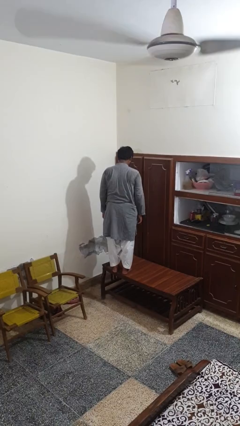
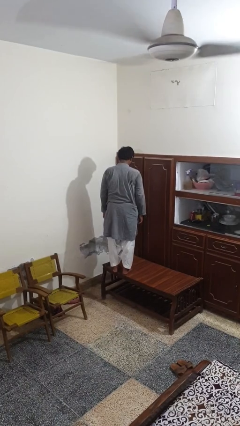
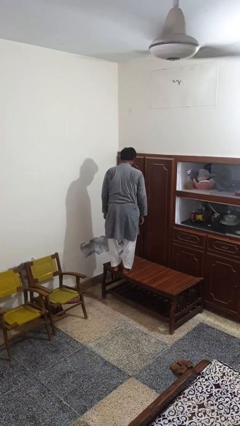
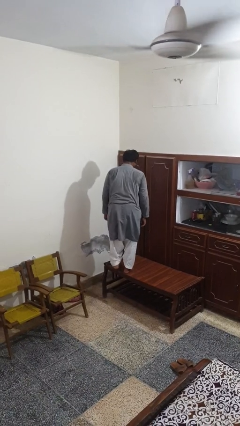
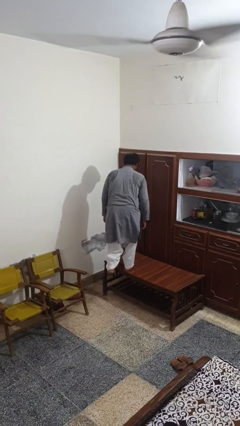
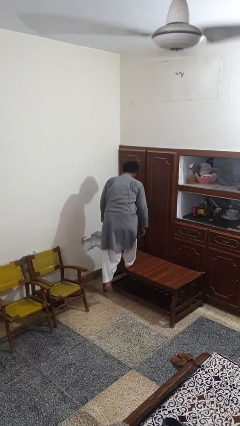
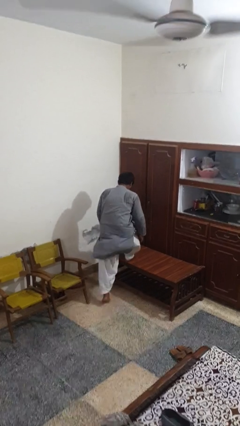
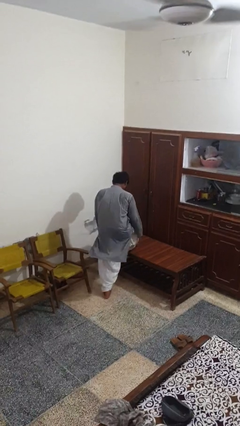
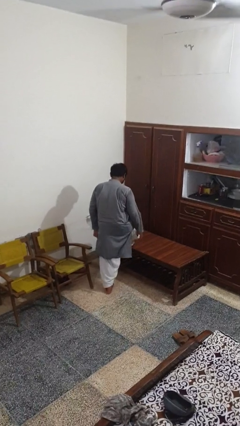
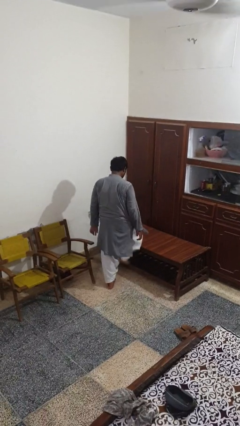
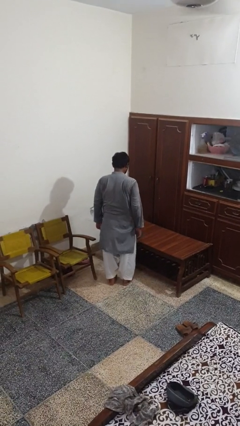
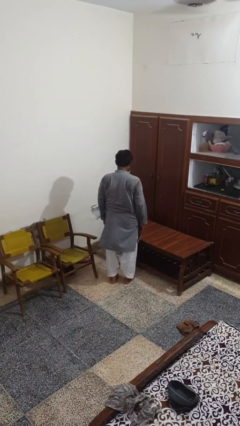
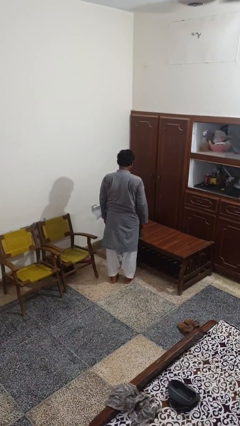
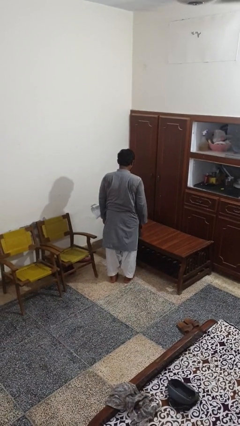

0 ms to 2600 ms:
person climbs off table

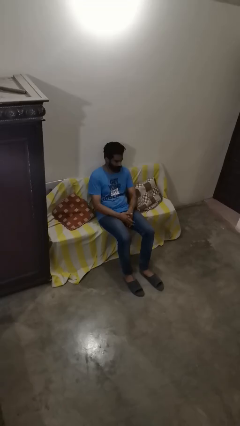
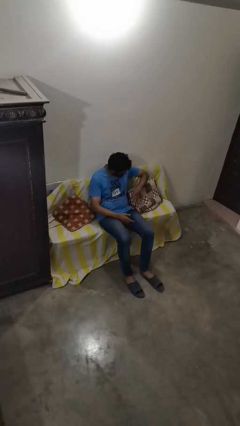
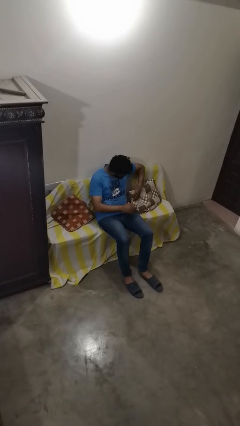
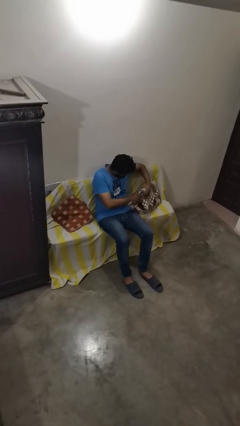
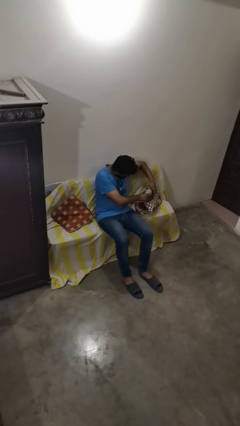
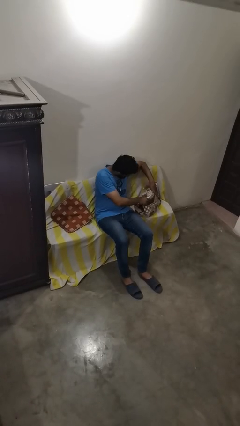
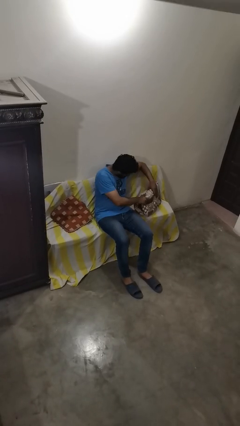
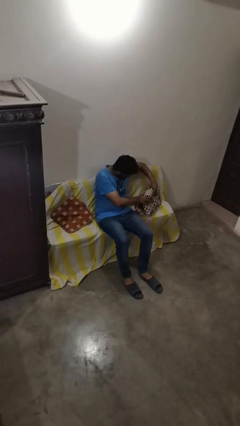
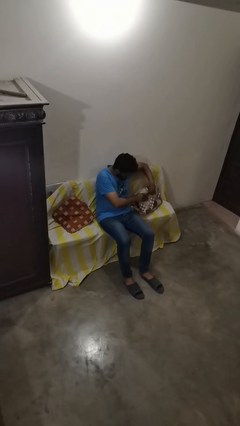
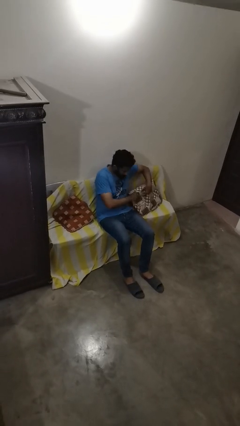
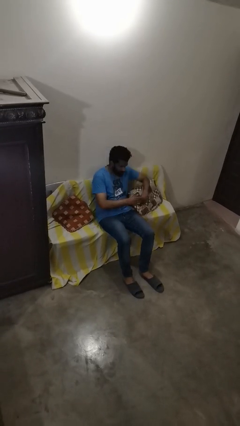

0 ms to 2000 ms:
person searches in couch

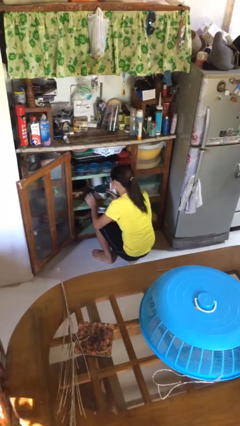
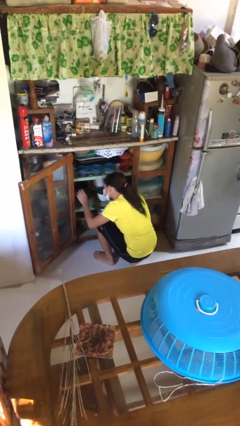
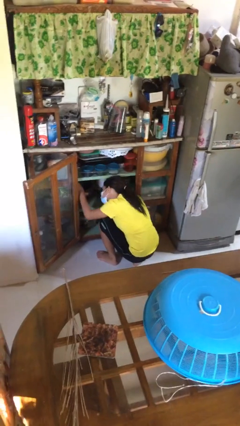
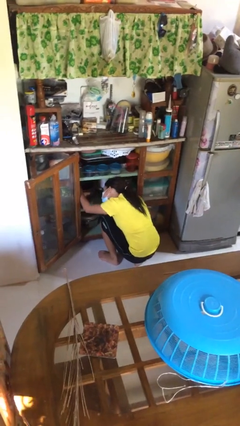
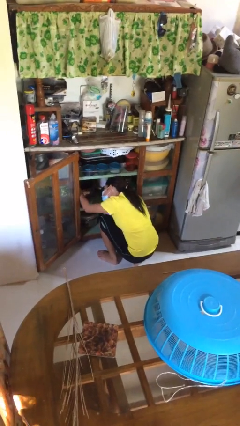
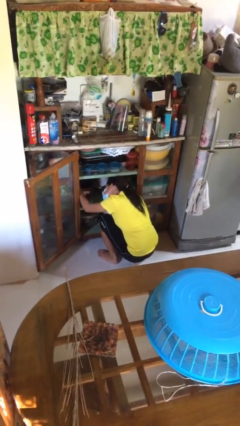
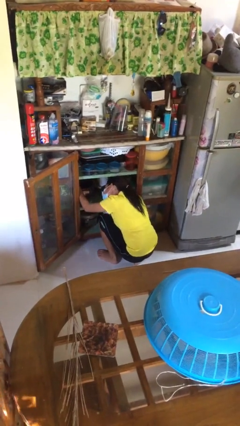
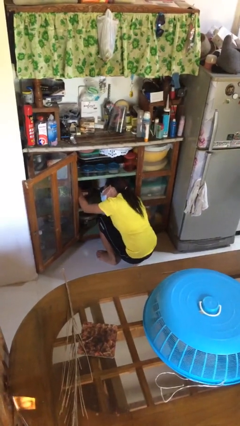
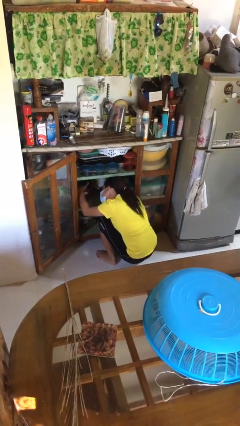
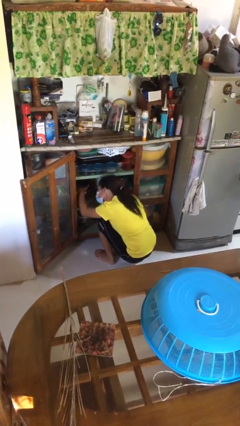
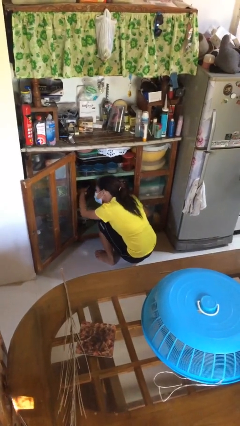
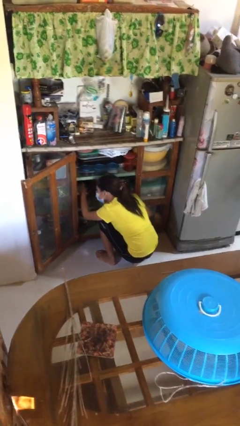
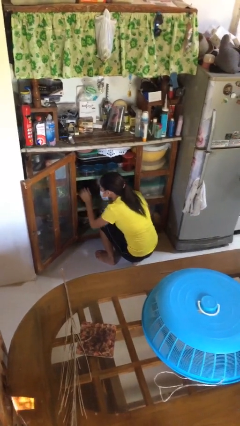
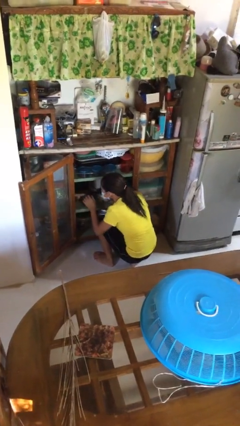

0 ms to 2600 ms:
person searches in cabinet

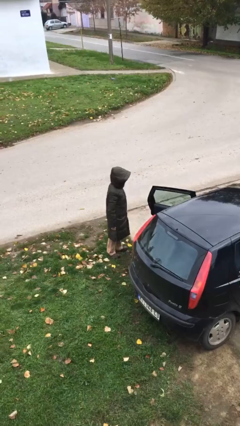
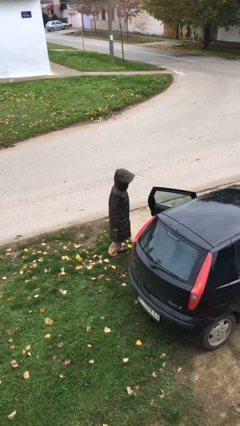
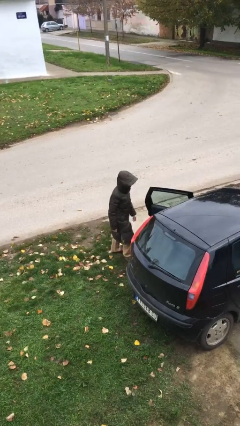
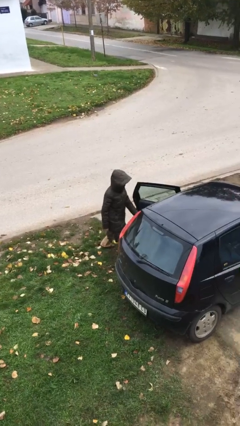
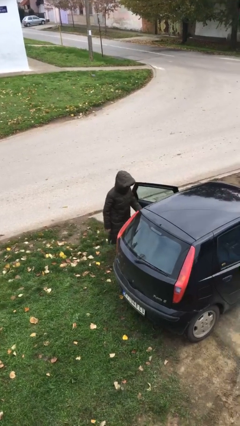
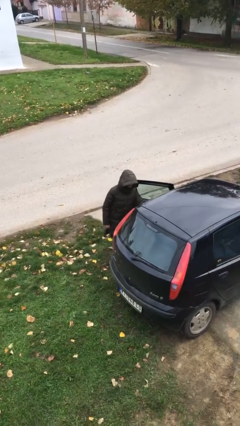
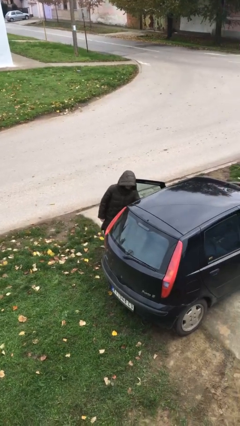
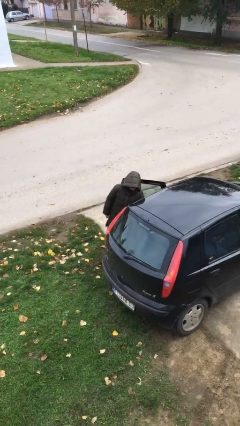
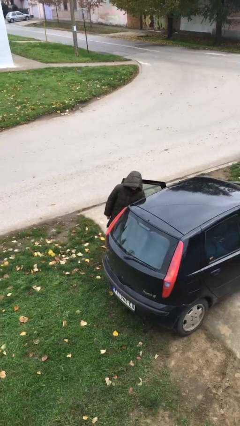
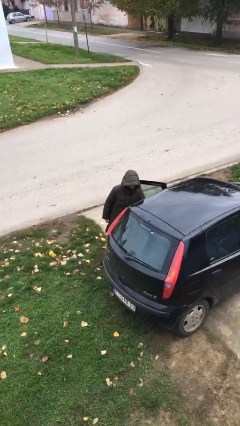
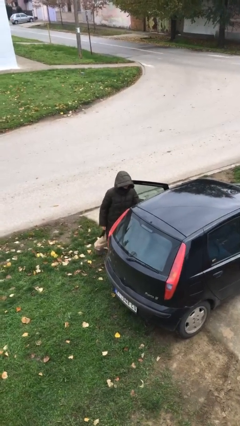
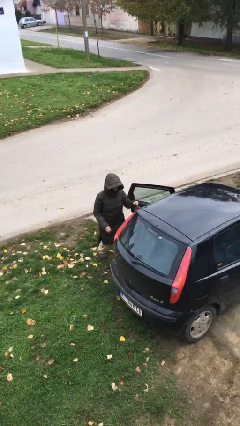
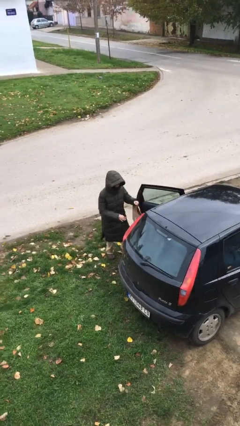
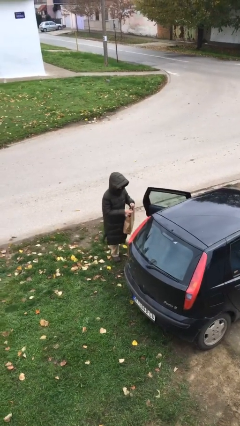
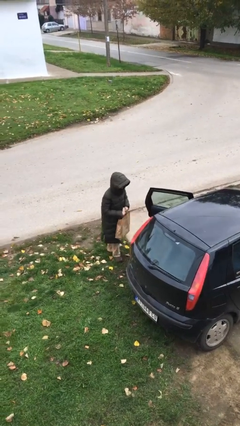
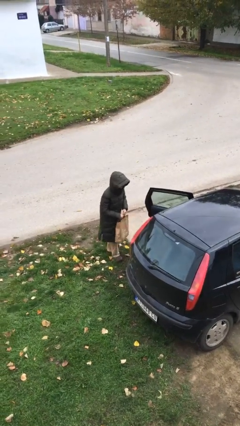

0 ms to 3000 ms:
person unloads car

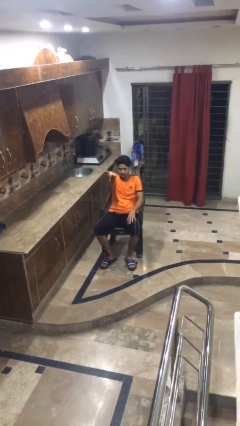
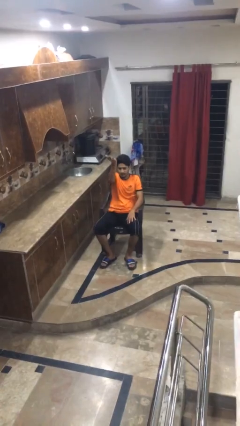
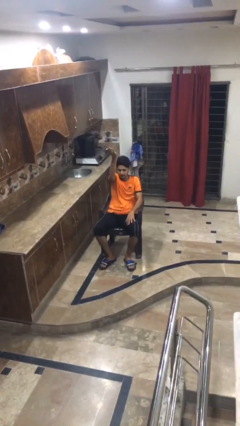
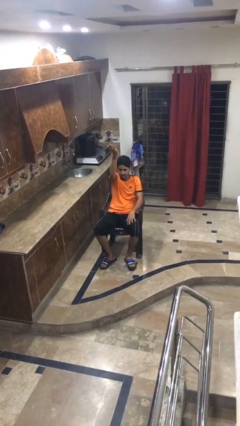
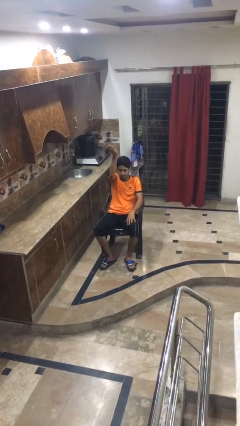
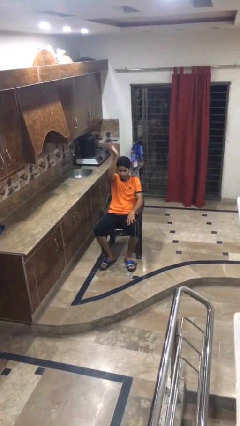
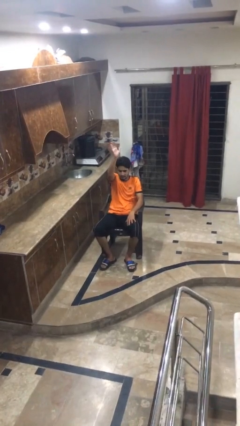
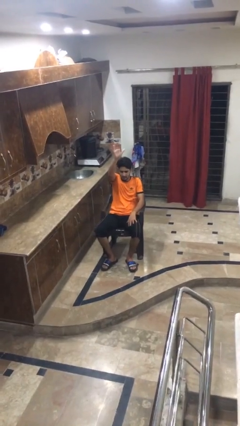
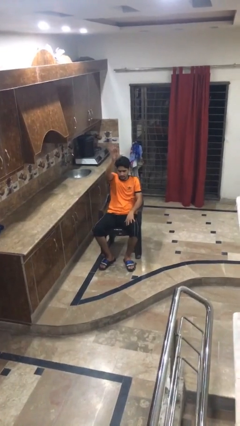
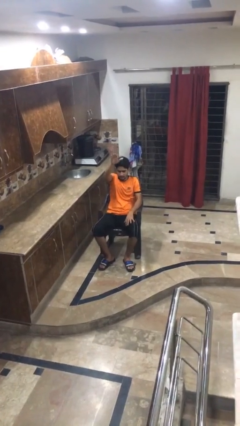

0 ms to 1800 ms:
person gestures swipe up

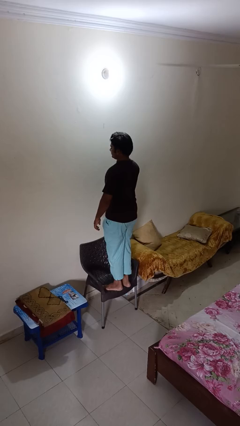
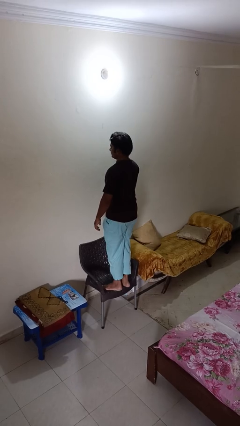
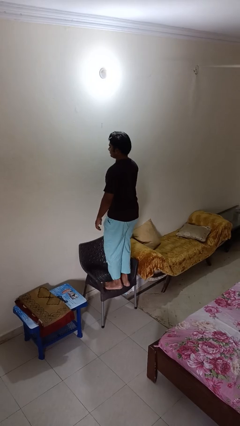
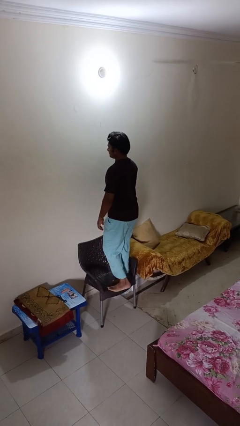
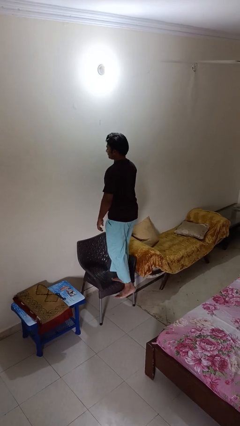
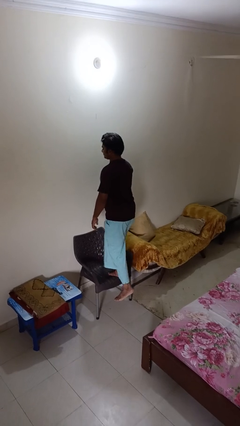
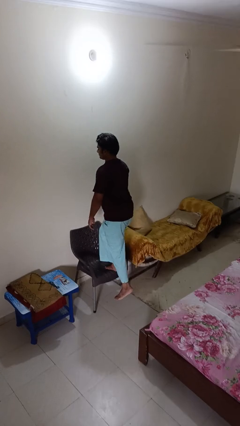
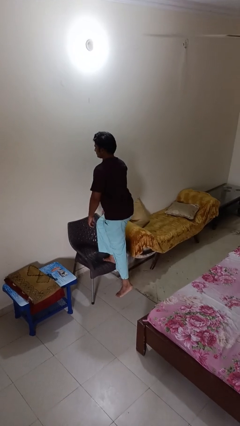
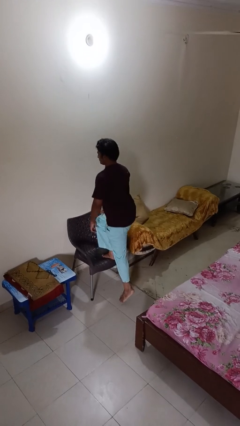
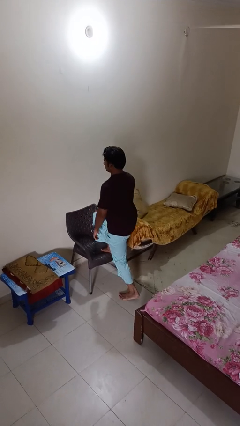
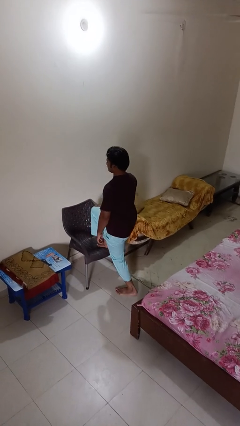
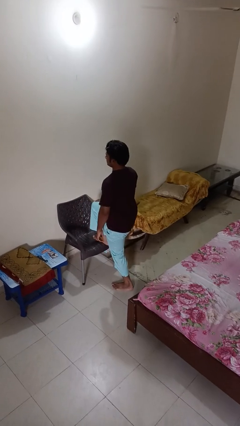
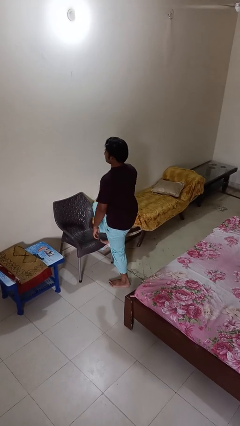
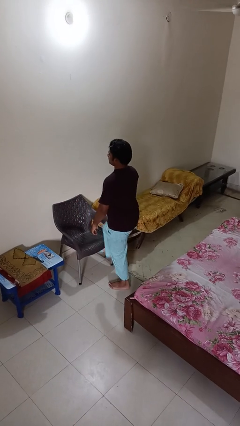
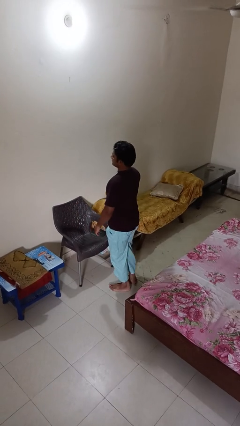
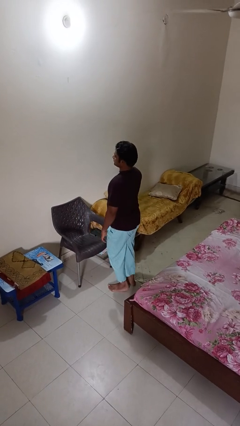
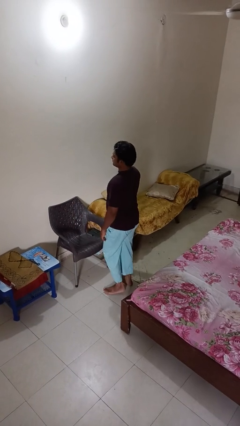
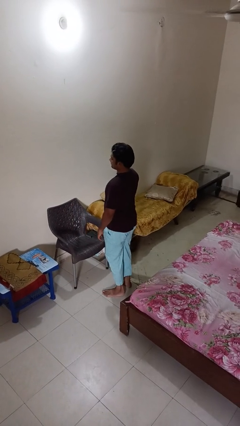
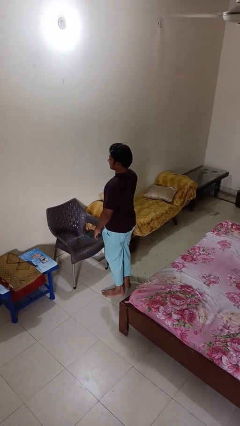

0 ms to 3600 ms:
person climbs off chair

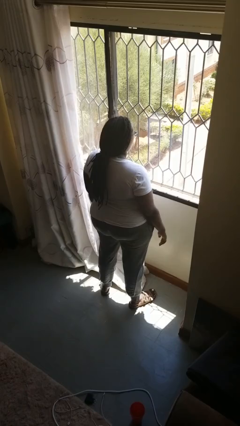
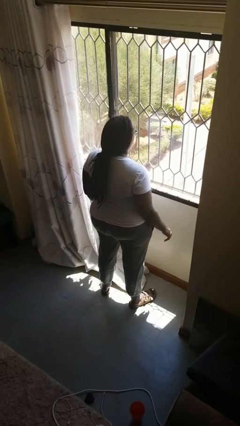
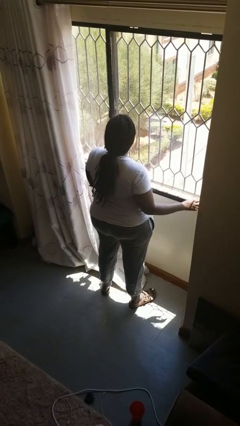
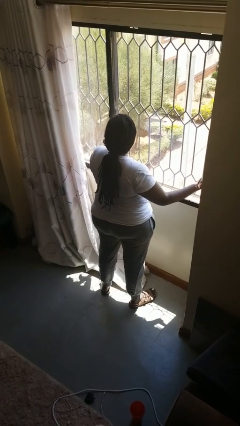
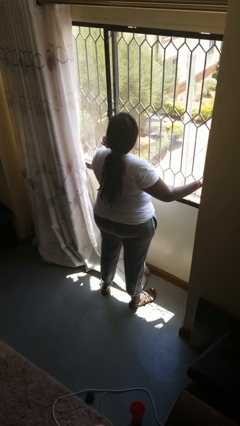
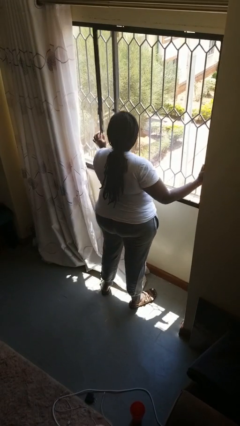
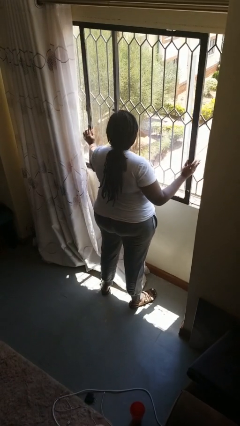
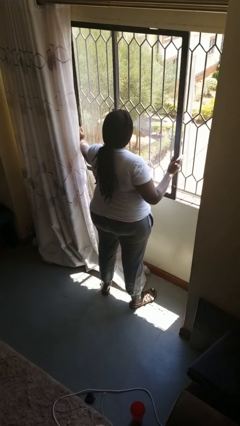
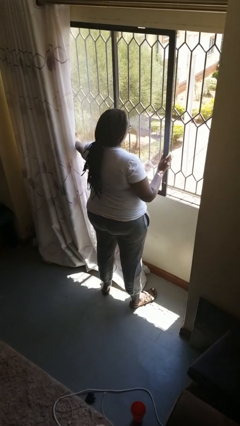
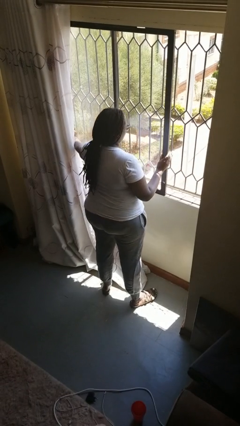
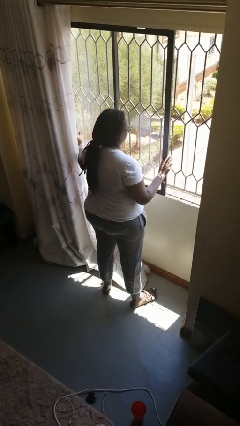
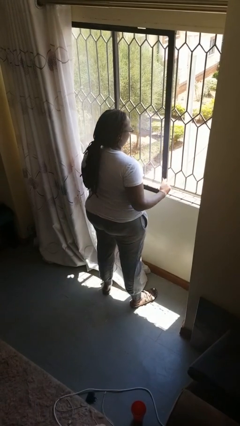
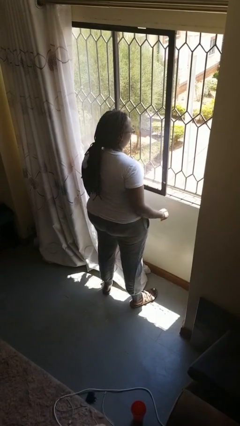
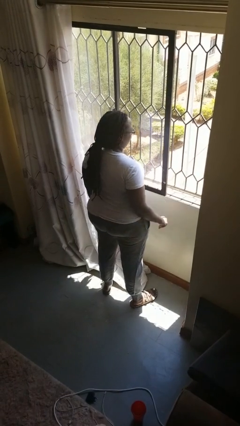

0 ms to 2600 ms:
person opens home window
